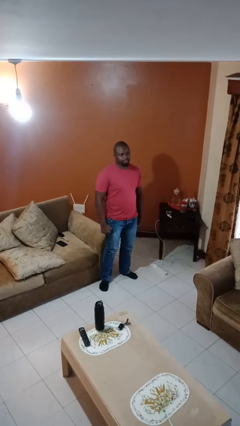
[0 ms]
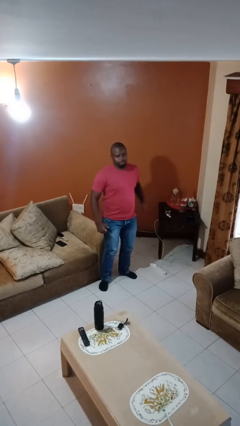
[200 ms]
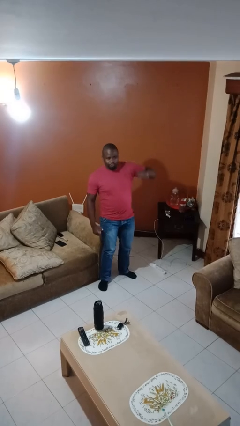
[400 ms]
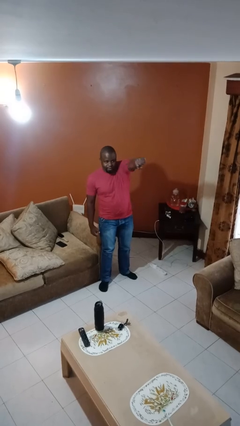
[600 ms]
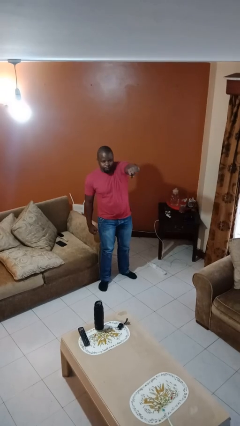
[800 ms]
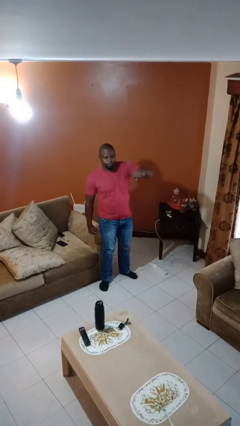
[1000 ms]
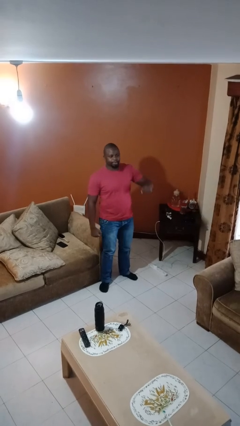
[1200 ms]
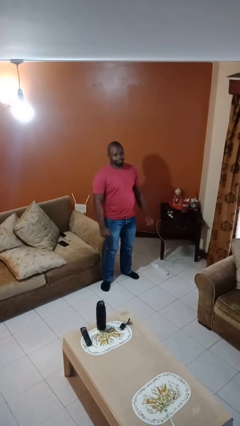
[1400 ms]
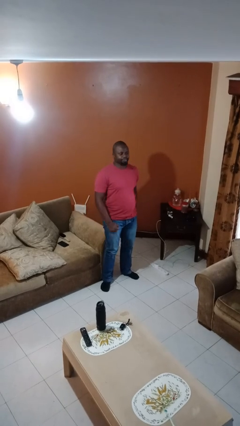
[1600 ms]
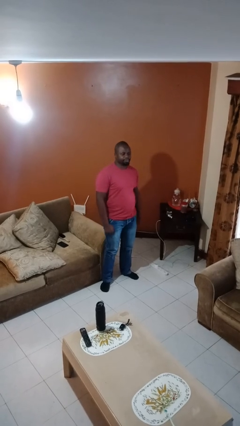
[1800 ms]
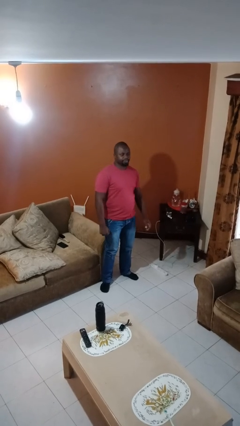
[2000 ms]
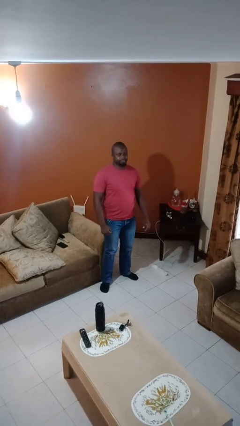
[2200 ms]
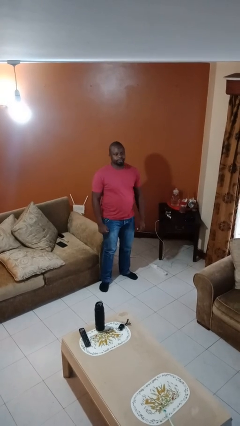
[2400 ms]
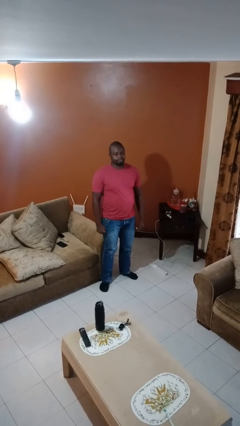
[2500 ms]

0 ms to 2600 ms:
person punches

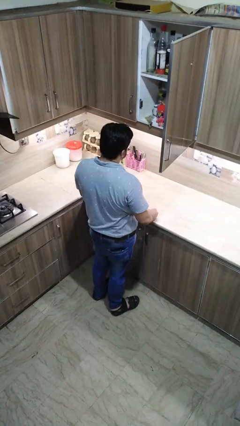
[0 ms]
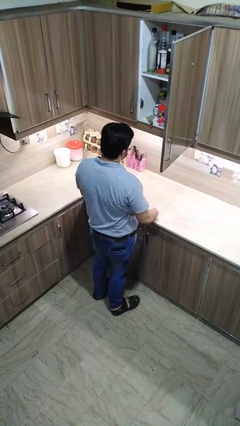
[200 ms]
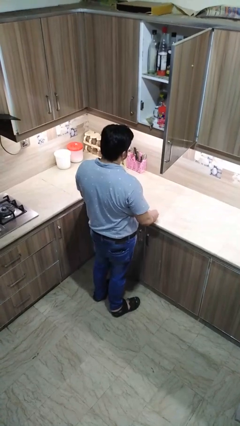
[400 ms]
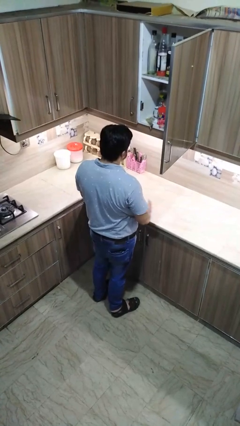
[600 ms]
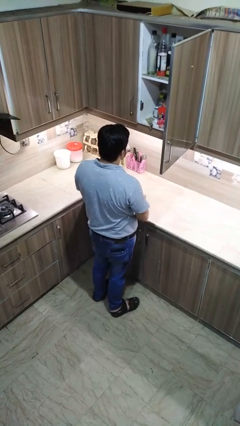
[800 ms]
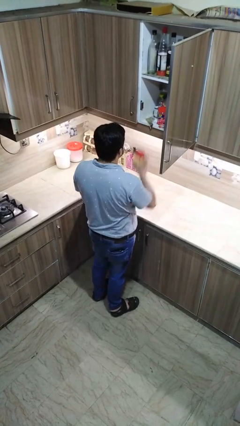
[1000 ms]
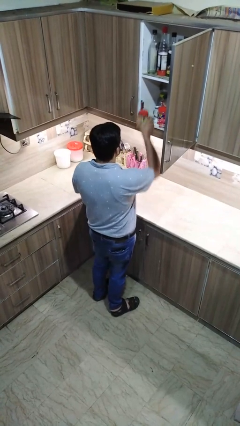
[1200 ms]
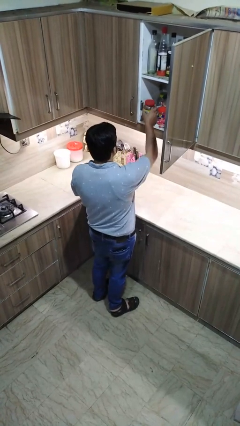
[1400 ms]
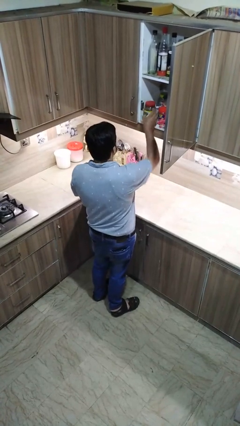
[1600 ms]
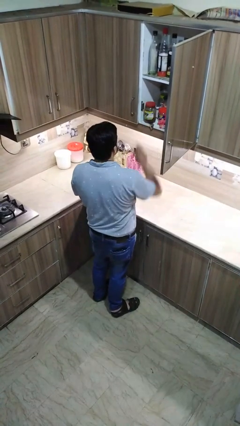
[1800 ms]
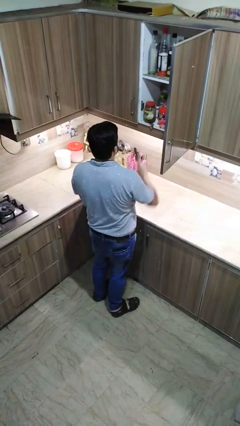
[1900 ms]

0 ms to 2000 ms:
person takes object from cabinet

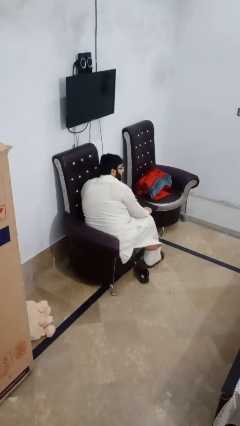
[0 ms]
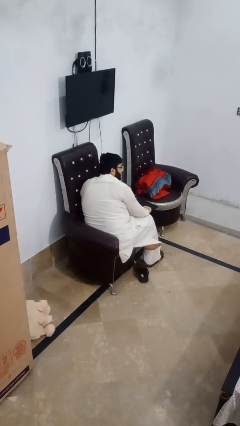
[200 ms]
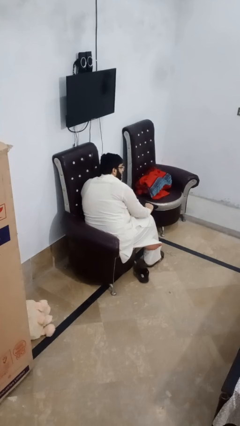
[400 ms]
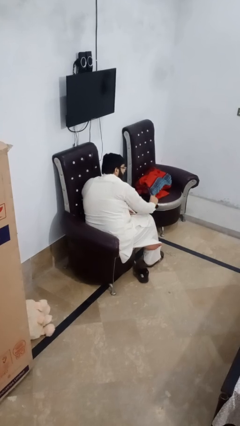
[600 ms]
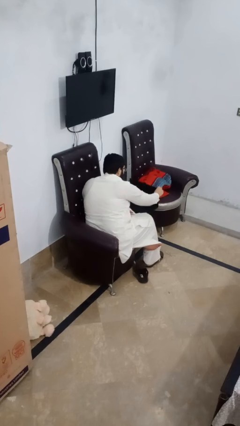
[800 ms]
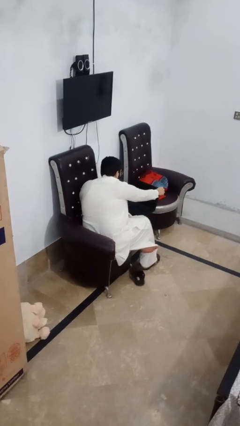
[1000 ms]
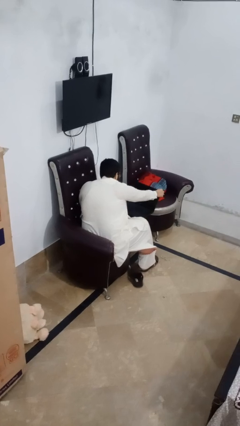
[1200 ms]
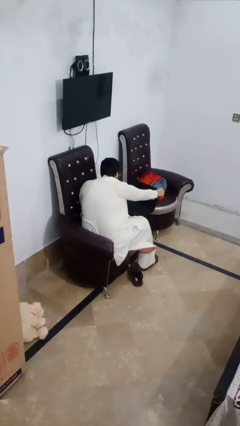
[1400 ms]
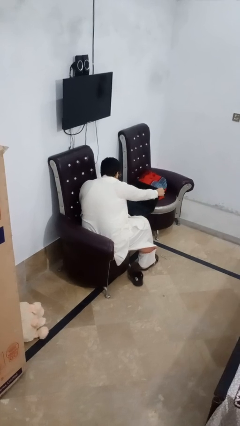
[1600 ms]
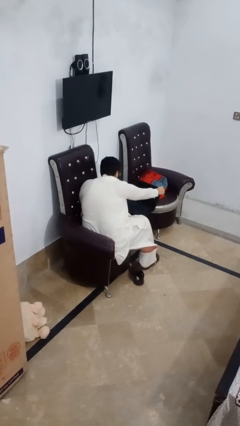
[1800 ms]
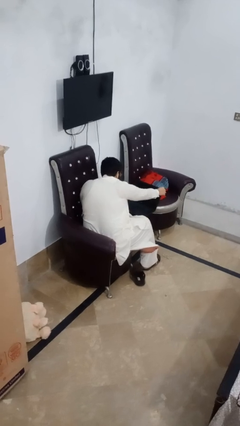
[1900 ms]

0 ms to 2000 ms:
person opens laptop

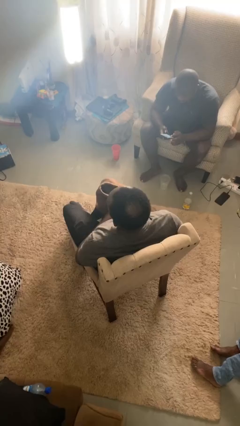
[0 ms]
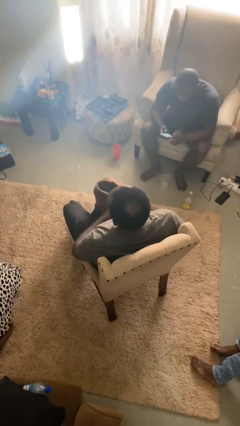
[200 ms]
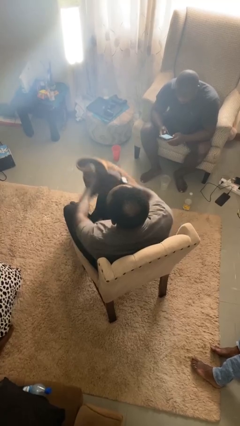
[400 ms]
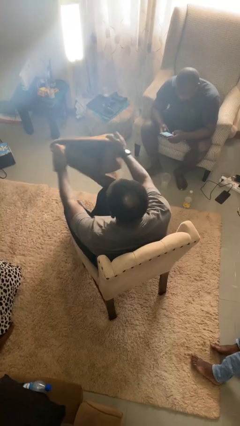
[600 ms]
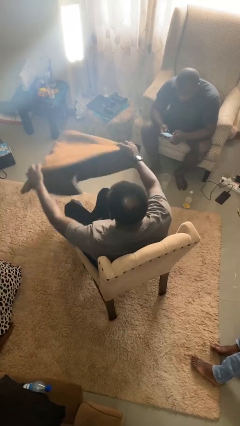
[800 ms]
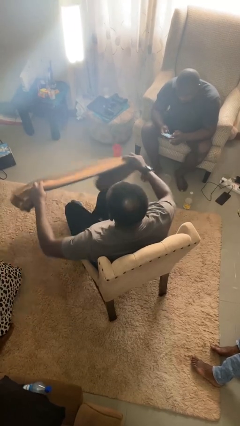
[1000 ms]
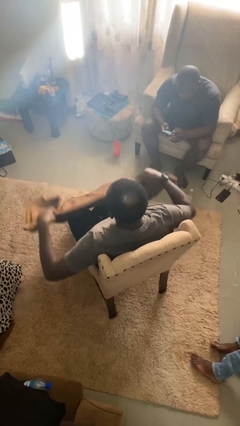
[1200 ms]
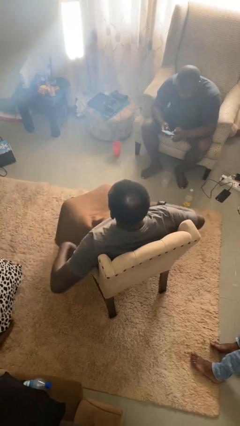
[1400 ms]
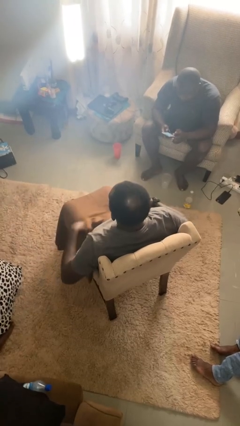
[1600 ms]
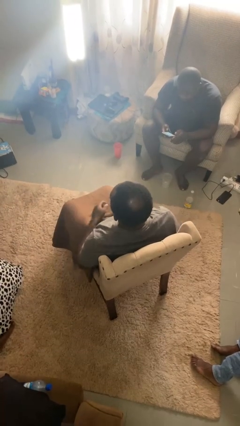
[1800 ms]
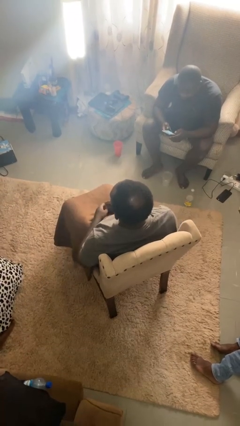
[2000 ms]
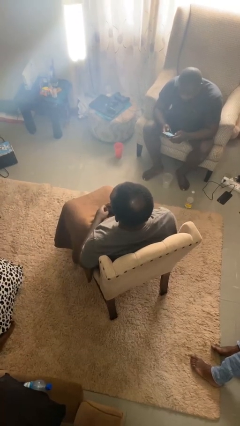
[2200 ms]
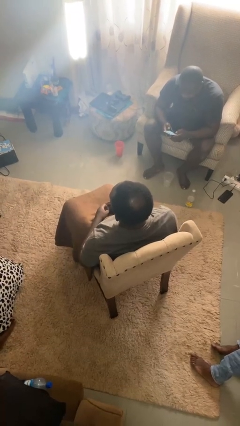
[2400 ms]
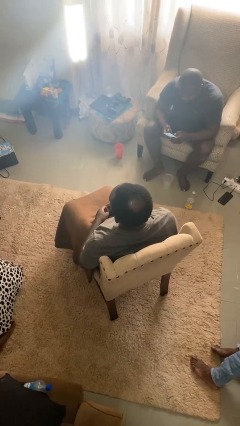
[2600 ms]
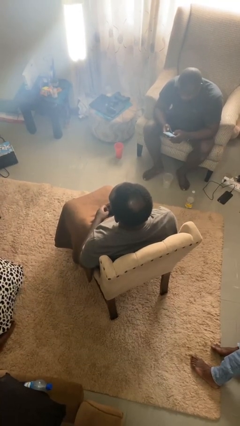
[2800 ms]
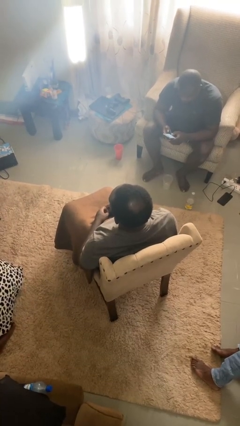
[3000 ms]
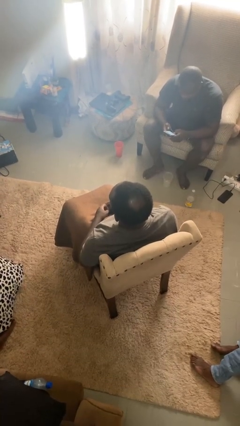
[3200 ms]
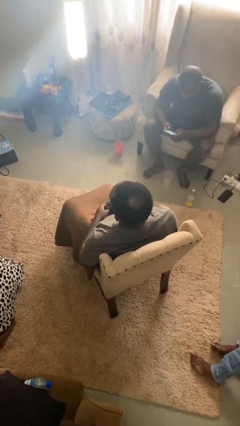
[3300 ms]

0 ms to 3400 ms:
person covers with blanket

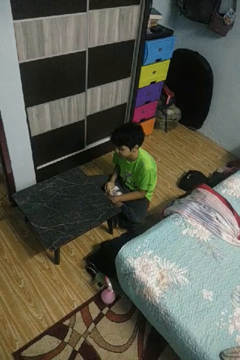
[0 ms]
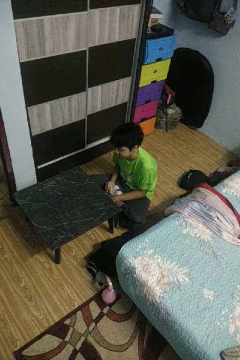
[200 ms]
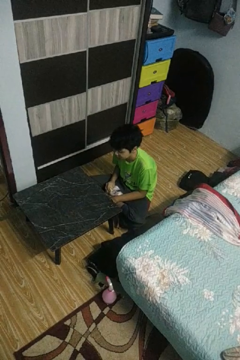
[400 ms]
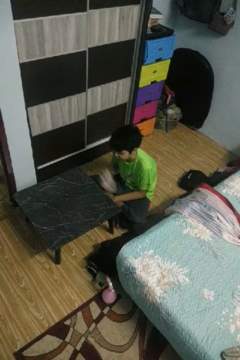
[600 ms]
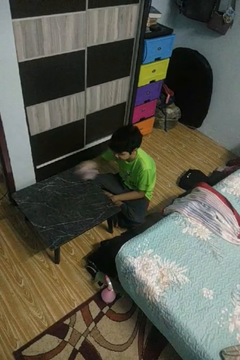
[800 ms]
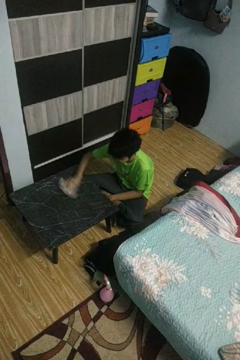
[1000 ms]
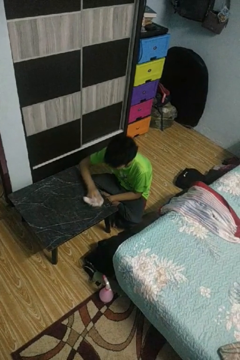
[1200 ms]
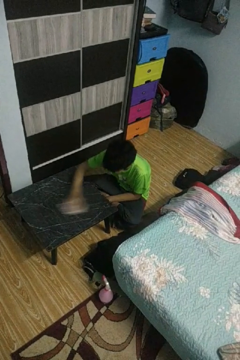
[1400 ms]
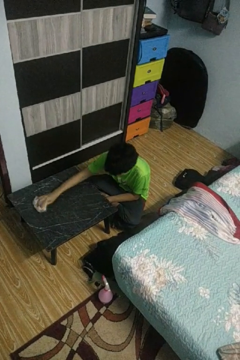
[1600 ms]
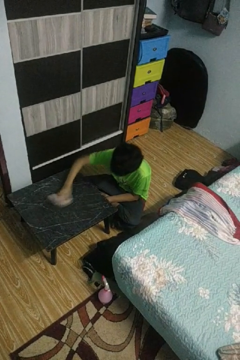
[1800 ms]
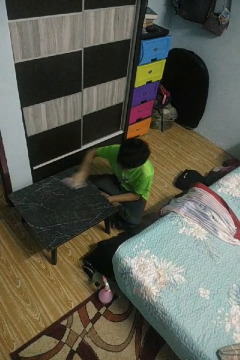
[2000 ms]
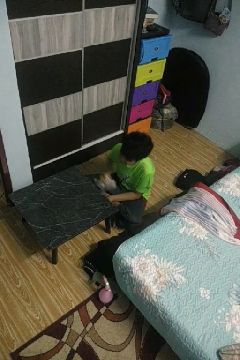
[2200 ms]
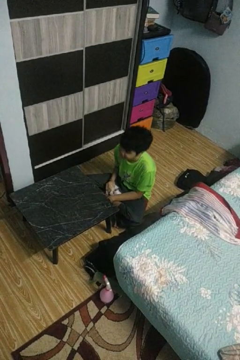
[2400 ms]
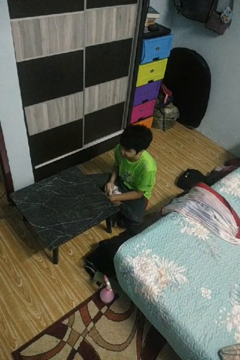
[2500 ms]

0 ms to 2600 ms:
person cleans table with rag

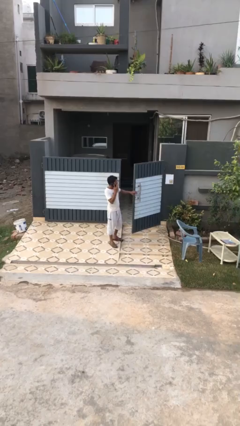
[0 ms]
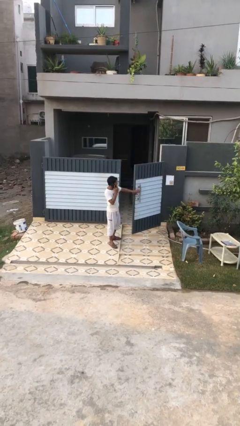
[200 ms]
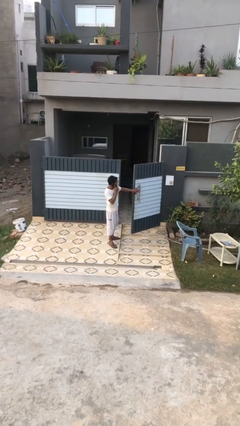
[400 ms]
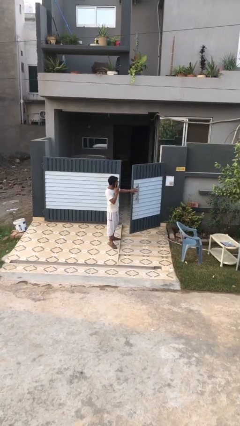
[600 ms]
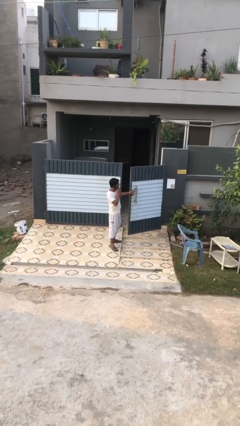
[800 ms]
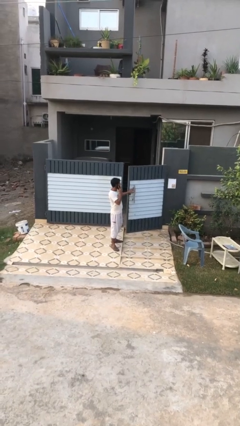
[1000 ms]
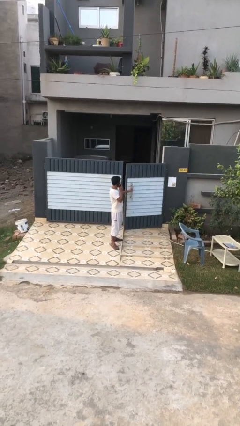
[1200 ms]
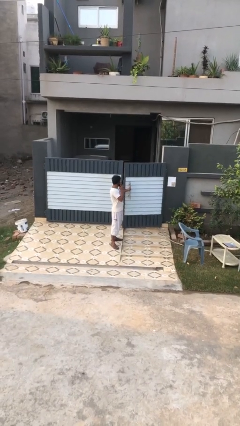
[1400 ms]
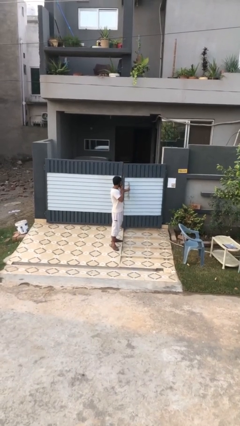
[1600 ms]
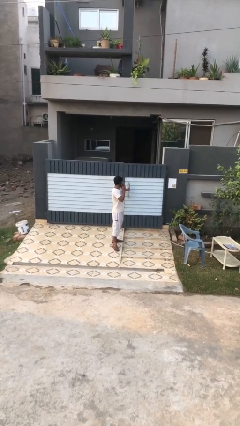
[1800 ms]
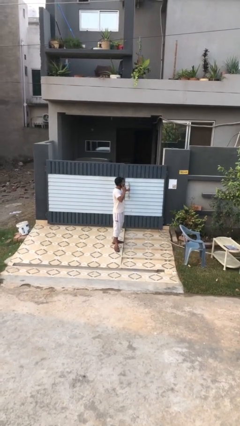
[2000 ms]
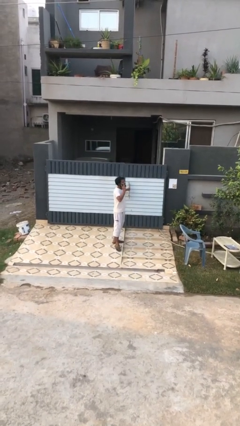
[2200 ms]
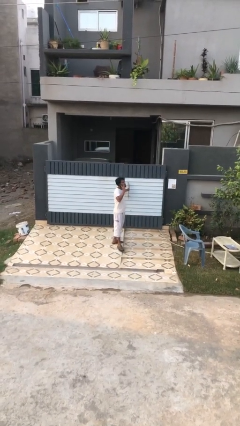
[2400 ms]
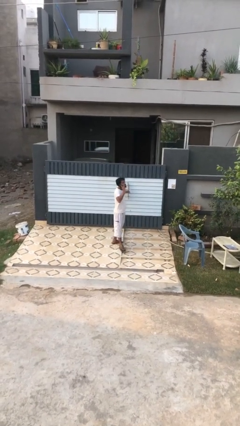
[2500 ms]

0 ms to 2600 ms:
person closes facility door

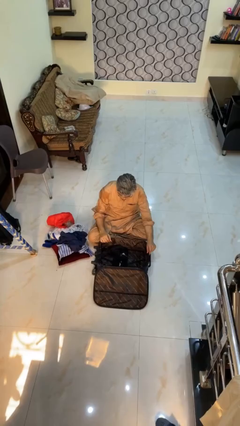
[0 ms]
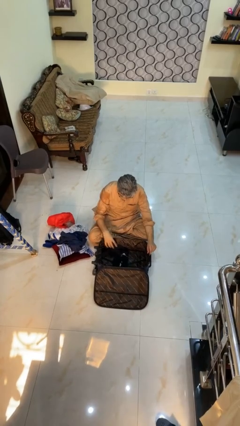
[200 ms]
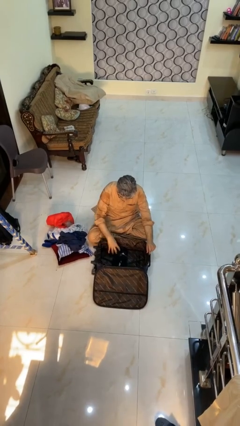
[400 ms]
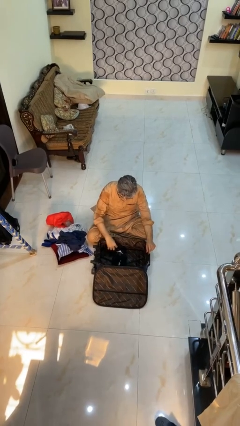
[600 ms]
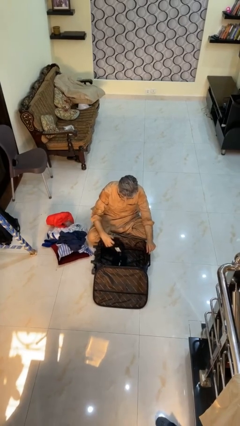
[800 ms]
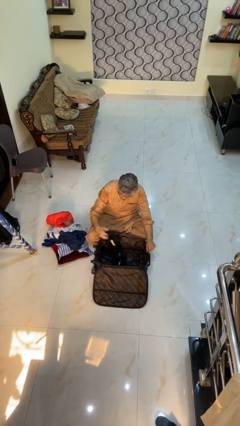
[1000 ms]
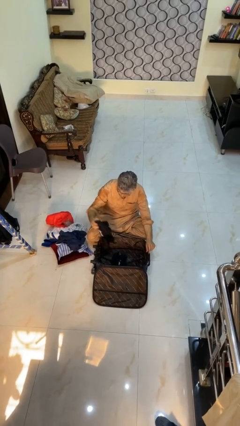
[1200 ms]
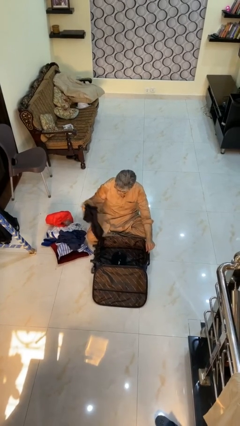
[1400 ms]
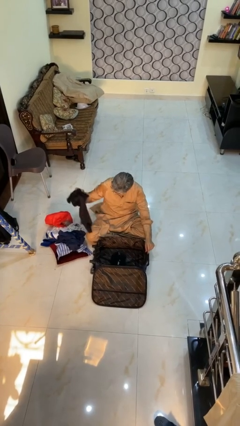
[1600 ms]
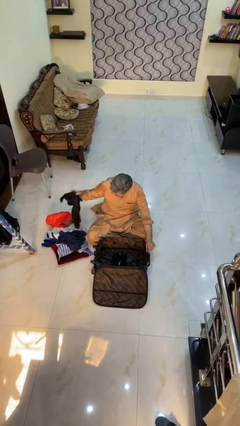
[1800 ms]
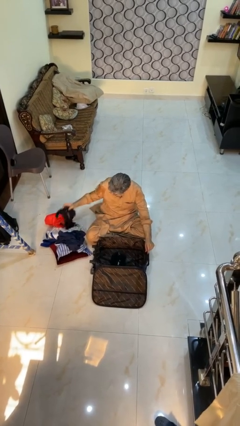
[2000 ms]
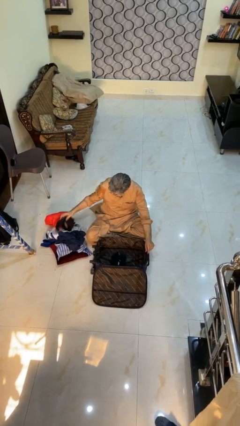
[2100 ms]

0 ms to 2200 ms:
person unloads clothes from suitcase
